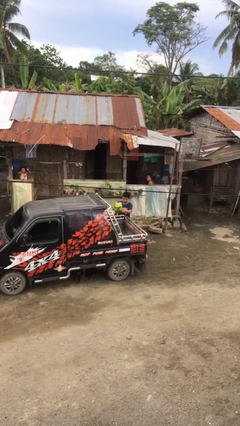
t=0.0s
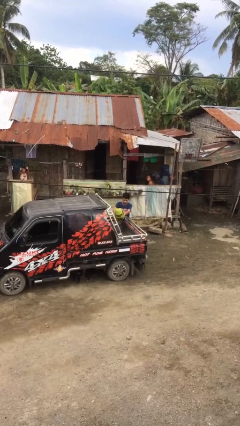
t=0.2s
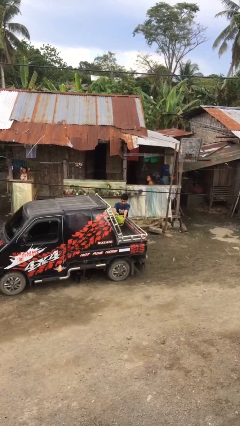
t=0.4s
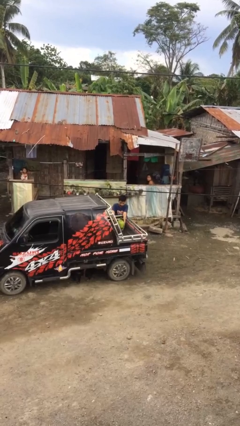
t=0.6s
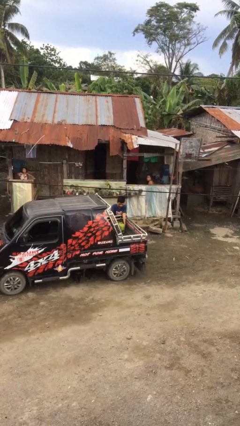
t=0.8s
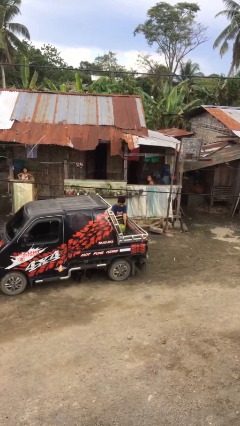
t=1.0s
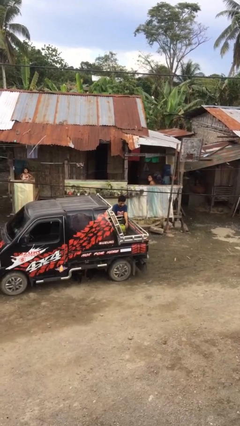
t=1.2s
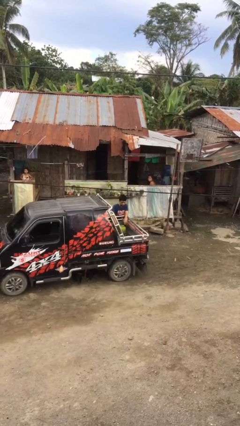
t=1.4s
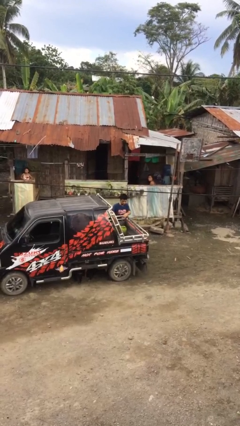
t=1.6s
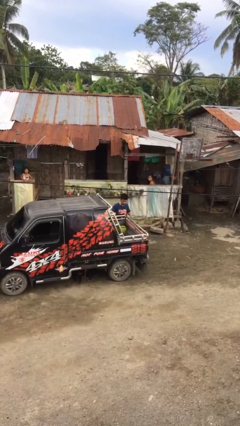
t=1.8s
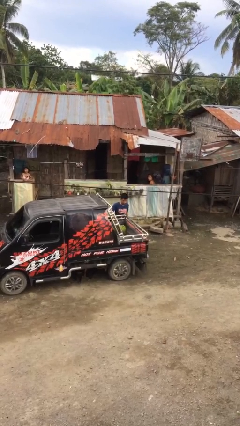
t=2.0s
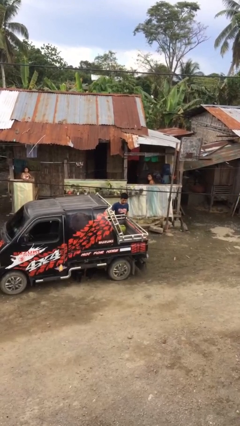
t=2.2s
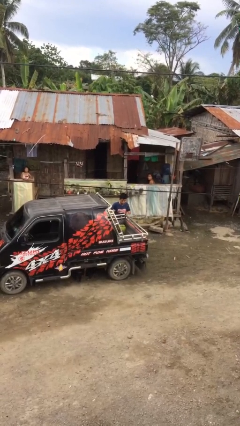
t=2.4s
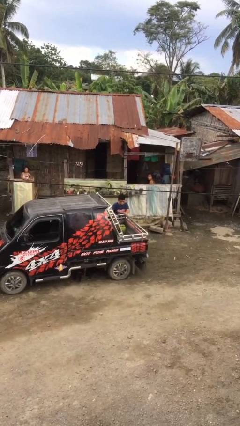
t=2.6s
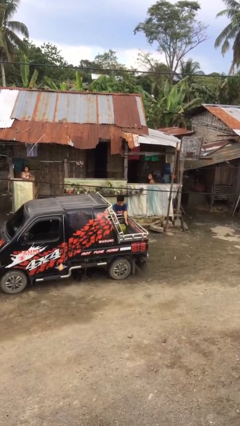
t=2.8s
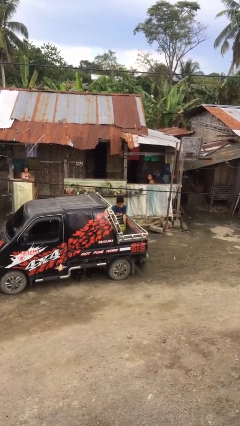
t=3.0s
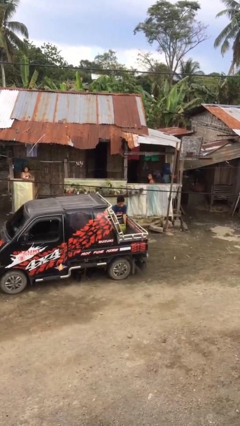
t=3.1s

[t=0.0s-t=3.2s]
person loads car

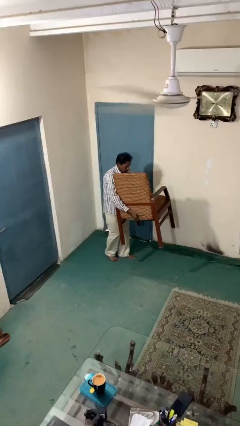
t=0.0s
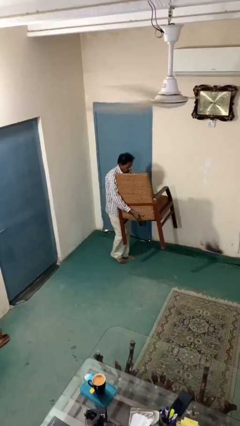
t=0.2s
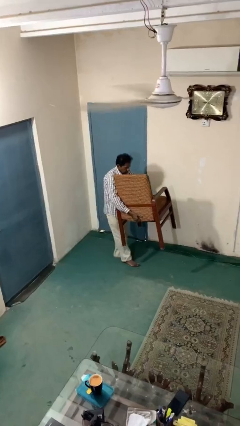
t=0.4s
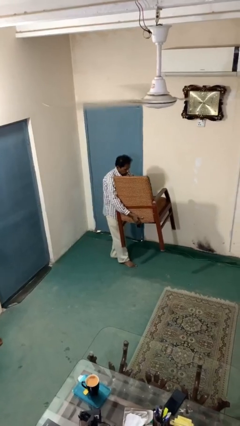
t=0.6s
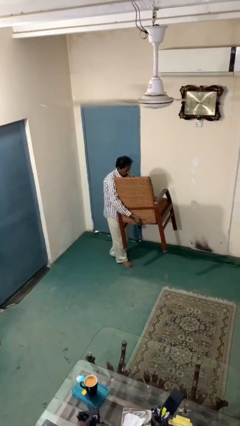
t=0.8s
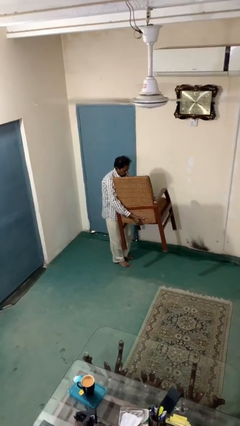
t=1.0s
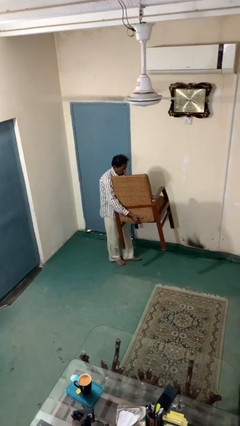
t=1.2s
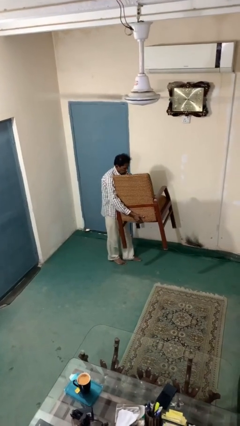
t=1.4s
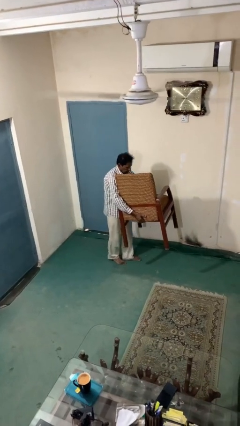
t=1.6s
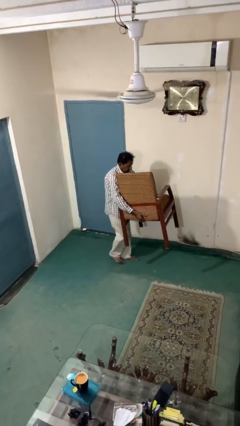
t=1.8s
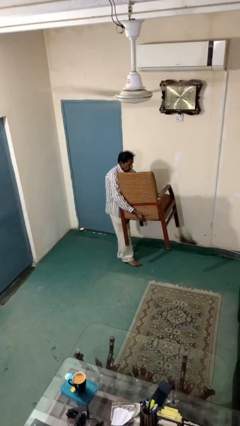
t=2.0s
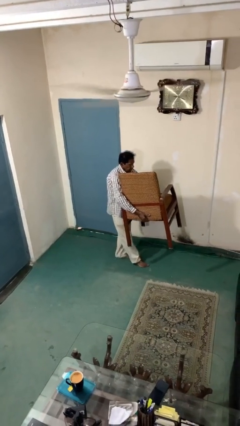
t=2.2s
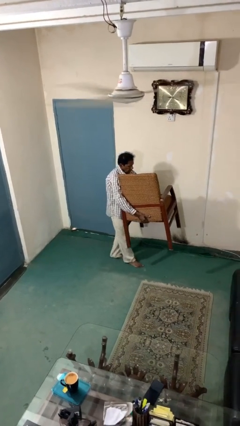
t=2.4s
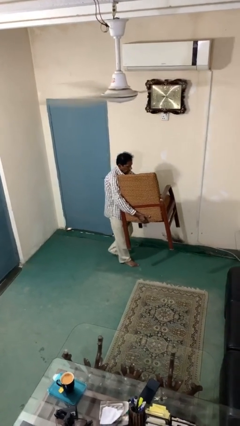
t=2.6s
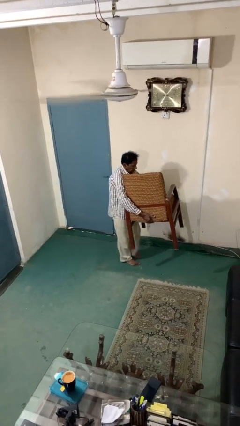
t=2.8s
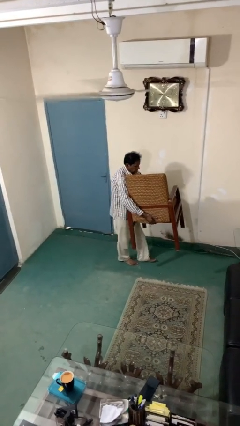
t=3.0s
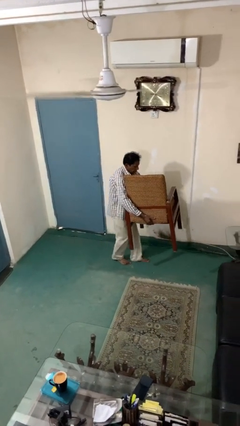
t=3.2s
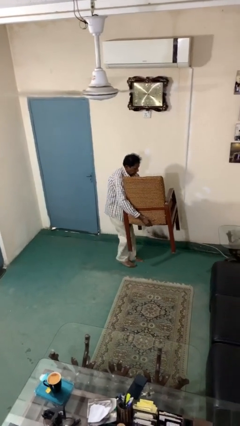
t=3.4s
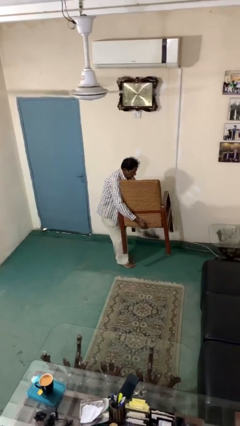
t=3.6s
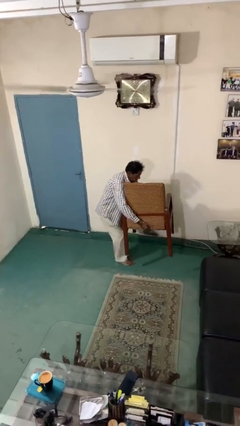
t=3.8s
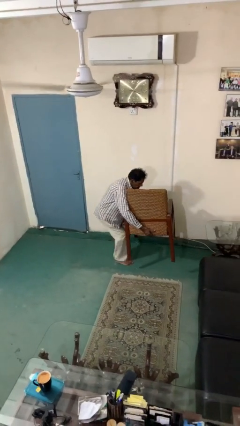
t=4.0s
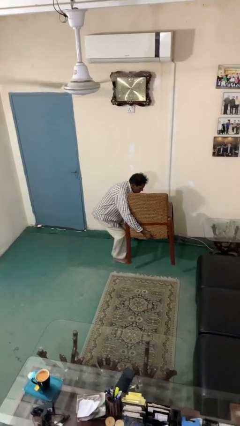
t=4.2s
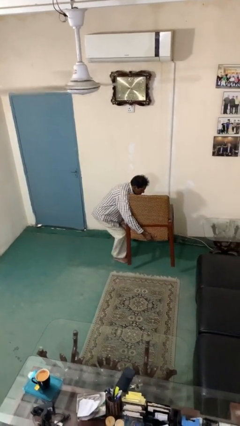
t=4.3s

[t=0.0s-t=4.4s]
person carries heavy object

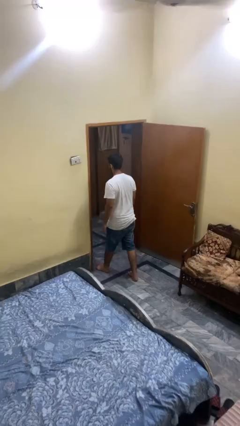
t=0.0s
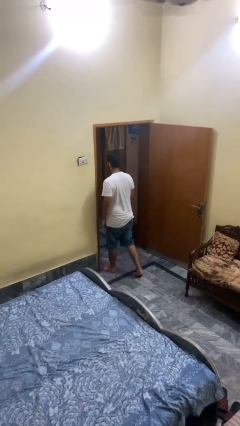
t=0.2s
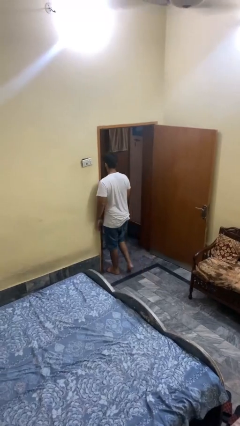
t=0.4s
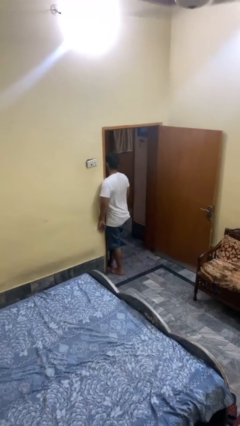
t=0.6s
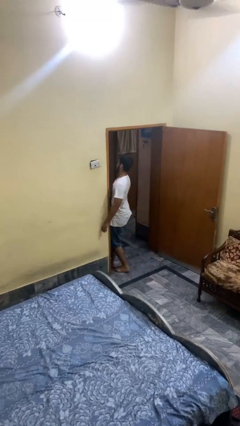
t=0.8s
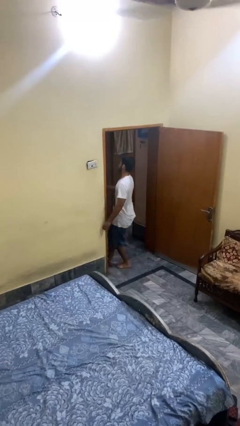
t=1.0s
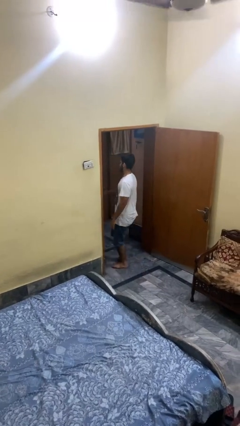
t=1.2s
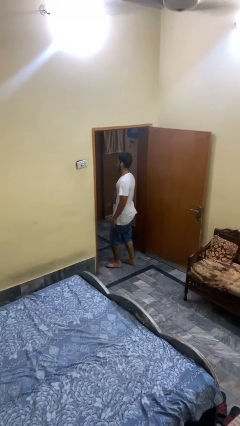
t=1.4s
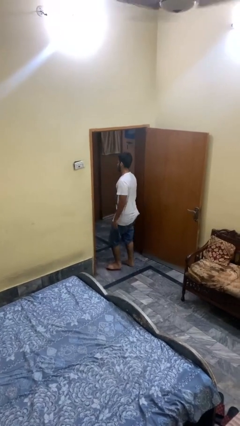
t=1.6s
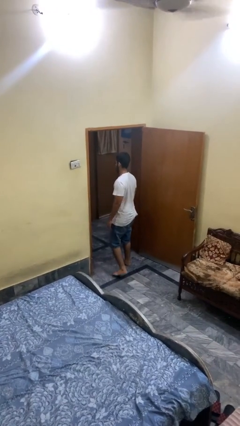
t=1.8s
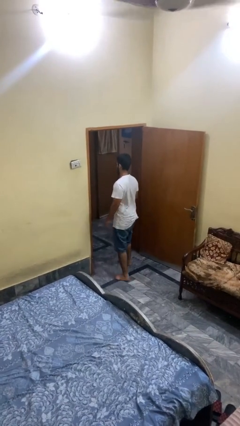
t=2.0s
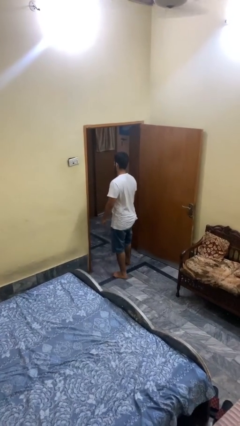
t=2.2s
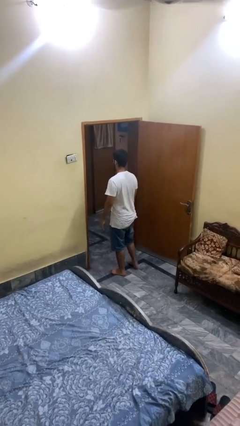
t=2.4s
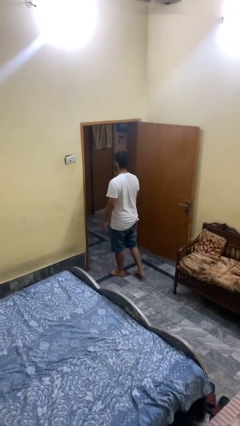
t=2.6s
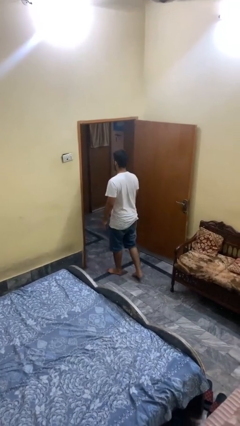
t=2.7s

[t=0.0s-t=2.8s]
person bumps into wall

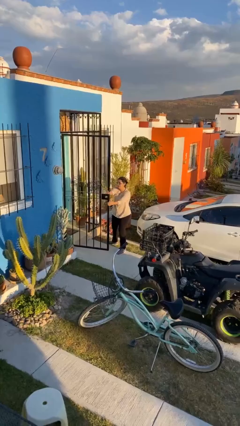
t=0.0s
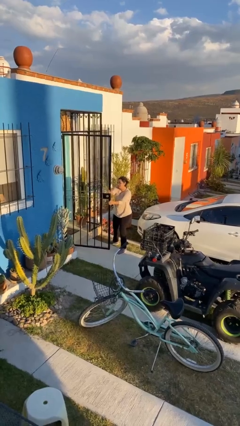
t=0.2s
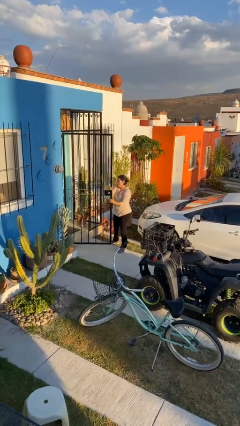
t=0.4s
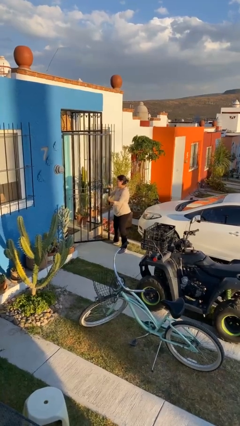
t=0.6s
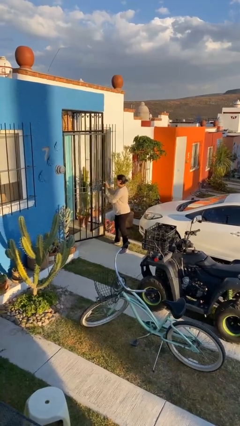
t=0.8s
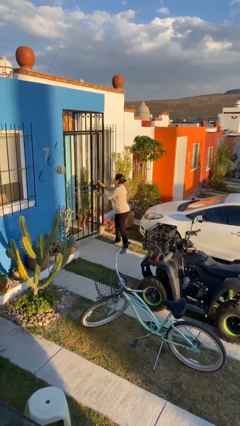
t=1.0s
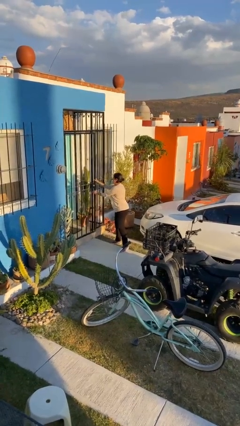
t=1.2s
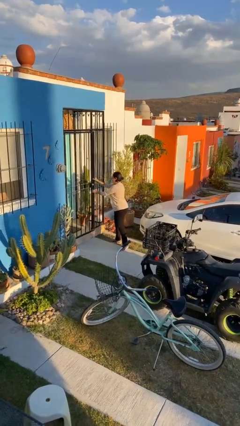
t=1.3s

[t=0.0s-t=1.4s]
person closes facility door

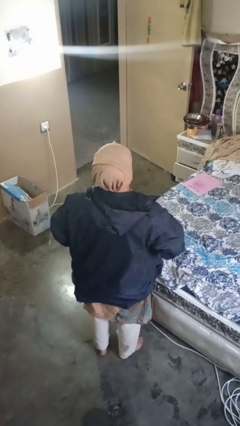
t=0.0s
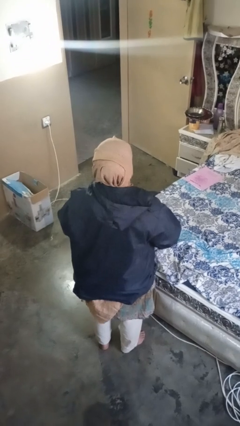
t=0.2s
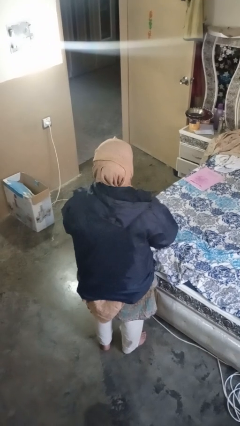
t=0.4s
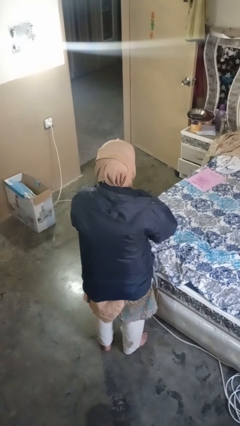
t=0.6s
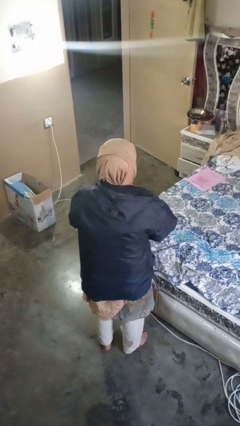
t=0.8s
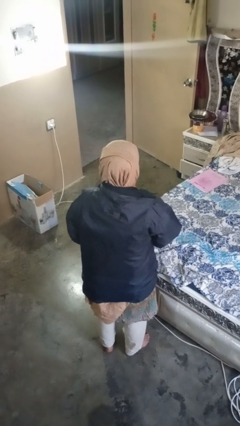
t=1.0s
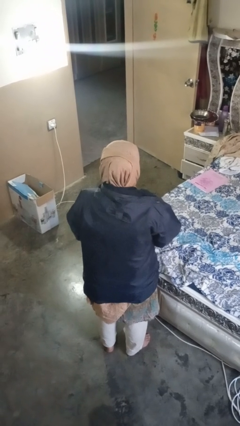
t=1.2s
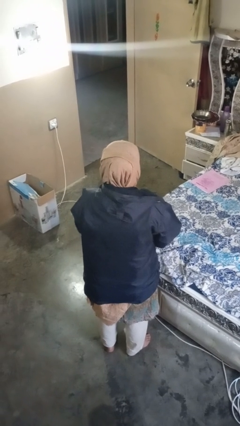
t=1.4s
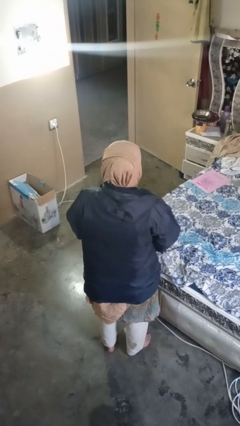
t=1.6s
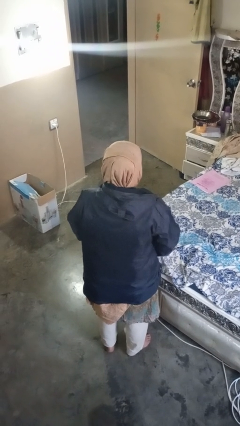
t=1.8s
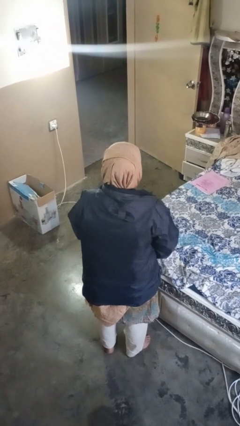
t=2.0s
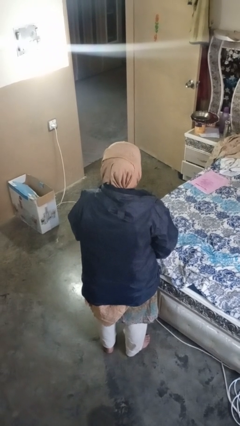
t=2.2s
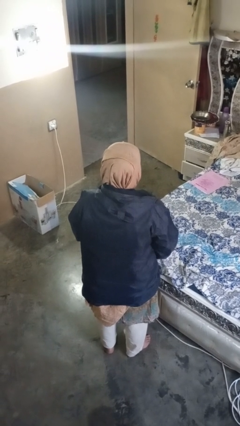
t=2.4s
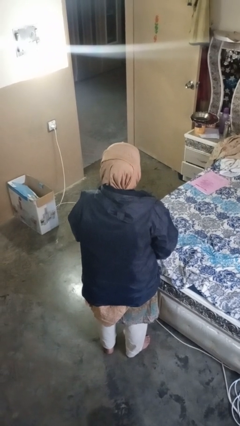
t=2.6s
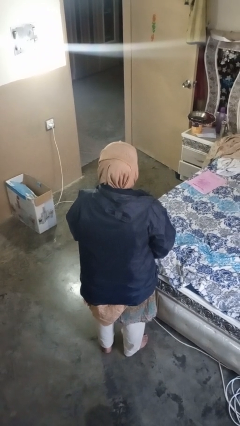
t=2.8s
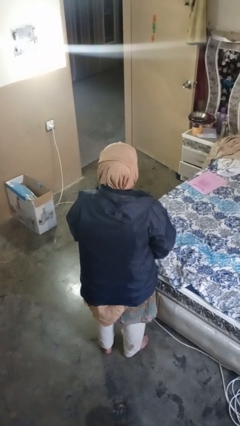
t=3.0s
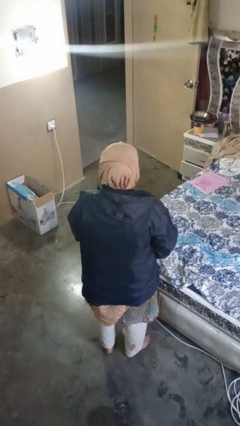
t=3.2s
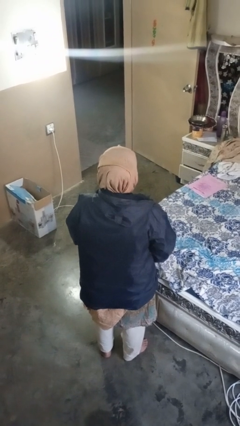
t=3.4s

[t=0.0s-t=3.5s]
person zips up jacket

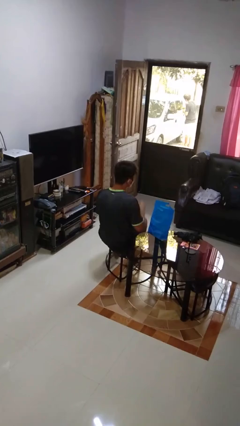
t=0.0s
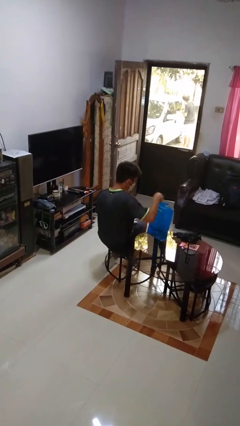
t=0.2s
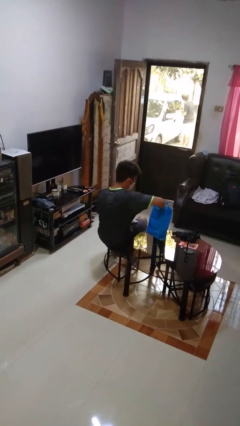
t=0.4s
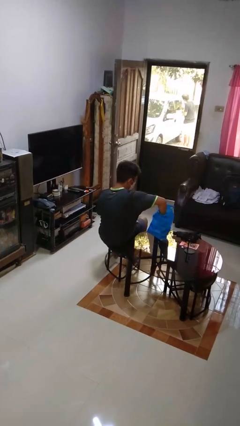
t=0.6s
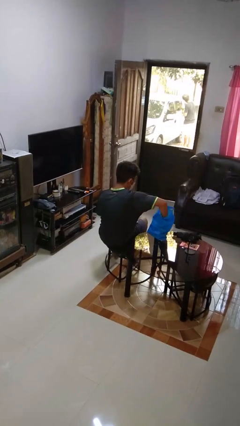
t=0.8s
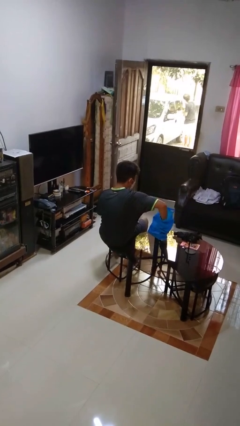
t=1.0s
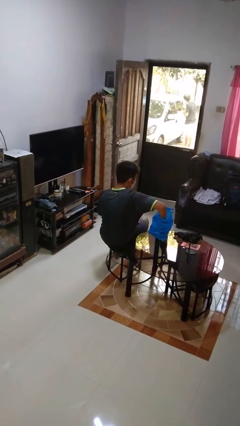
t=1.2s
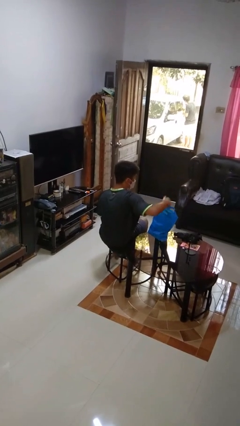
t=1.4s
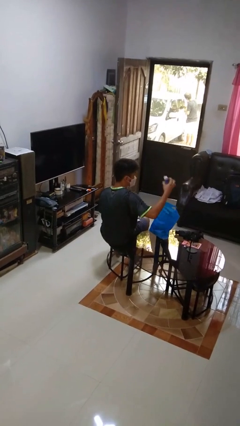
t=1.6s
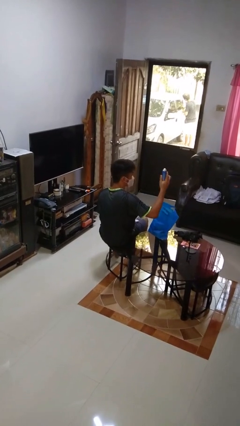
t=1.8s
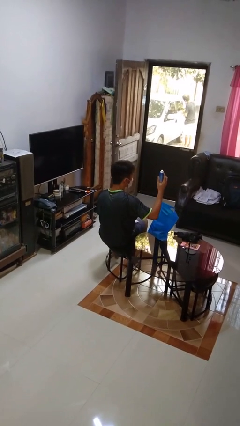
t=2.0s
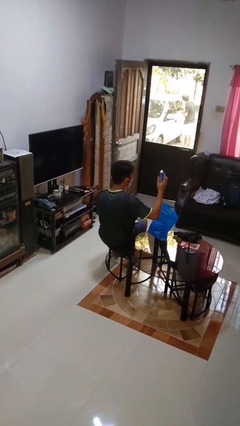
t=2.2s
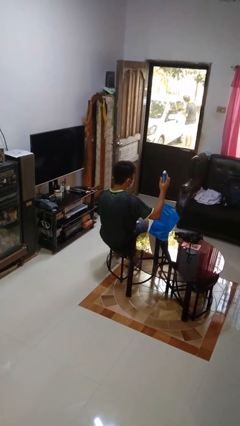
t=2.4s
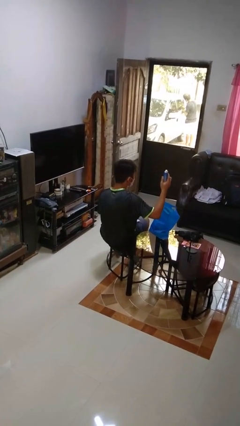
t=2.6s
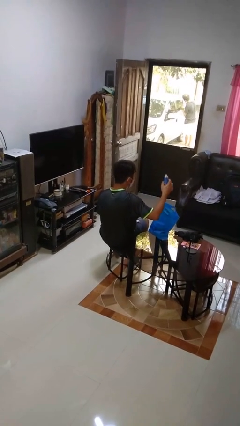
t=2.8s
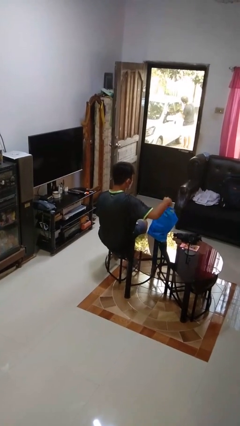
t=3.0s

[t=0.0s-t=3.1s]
person takes object from bag
